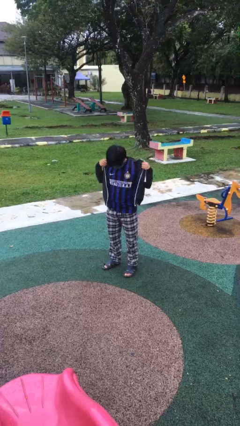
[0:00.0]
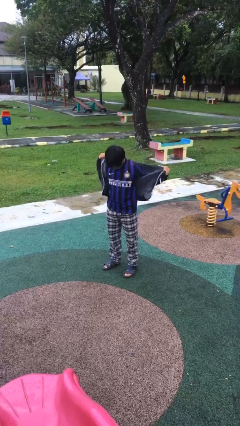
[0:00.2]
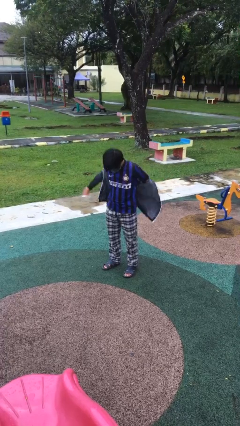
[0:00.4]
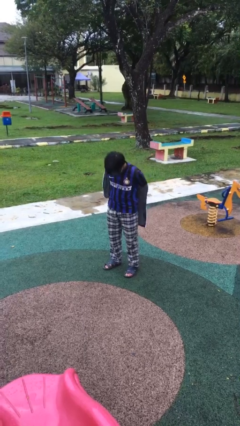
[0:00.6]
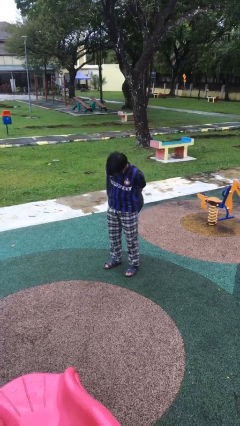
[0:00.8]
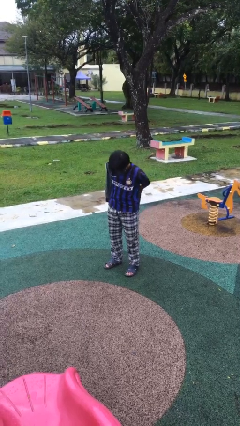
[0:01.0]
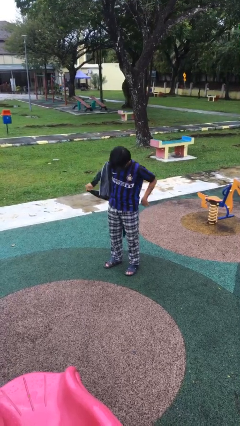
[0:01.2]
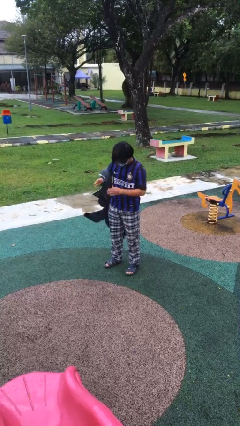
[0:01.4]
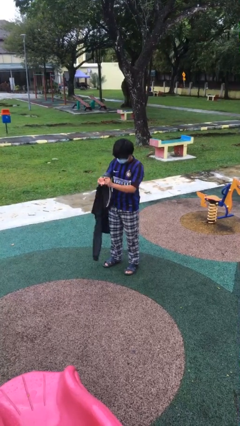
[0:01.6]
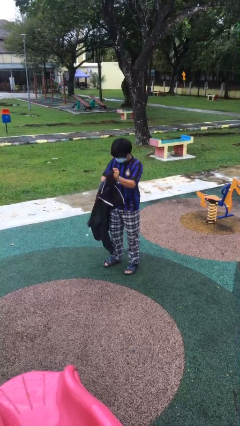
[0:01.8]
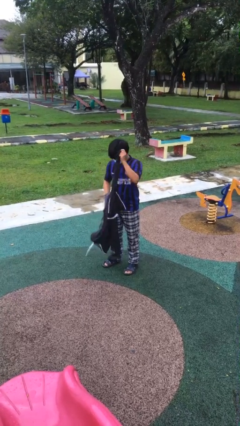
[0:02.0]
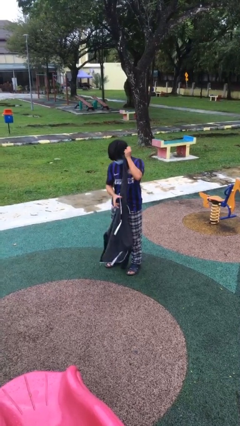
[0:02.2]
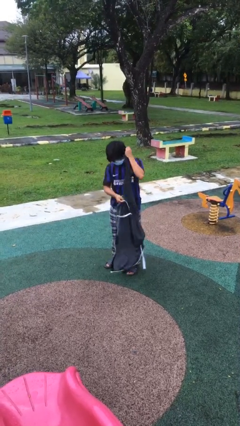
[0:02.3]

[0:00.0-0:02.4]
person takes off jacket

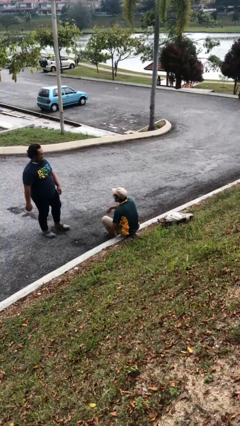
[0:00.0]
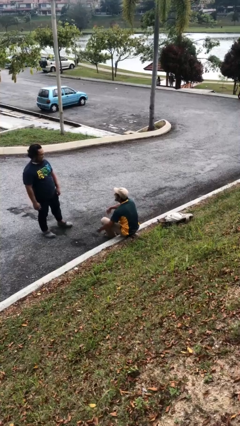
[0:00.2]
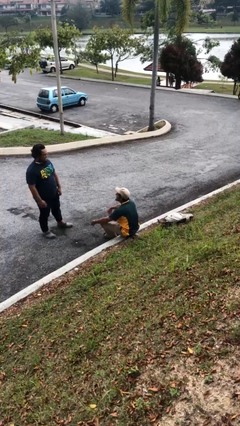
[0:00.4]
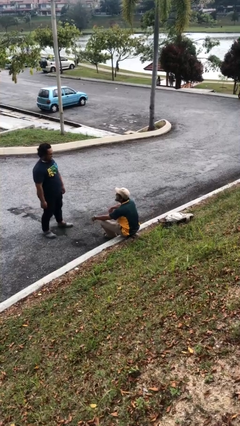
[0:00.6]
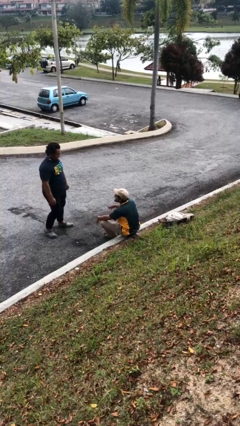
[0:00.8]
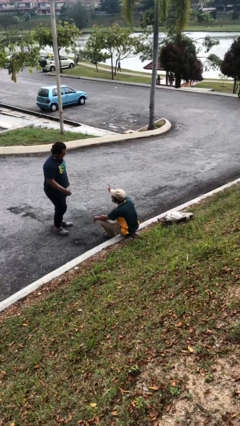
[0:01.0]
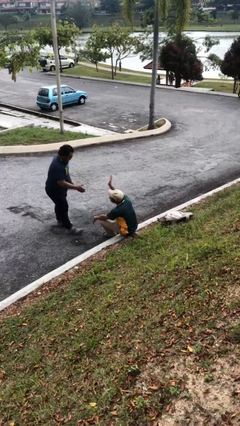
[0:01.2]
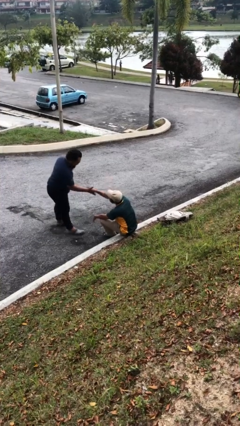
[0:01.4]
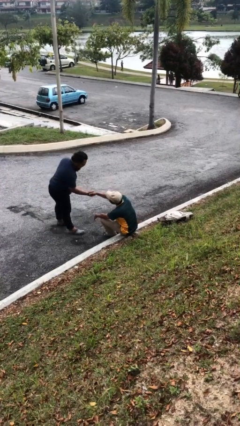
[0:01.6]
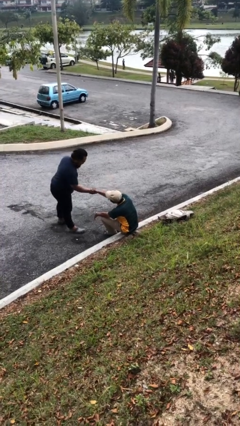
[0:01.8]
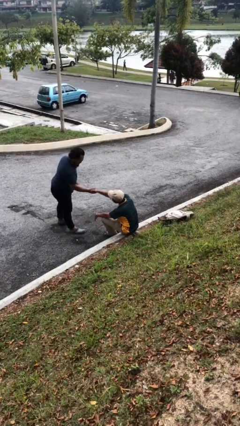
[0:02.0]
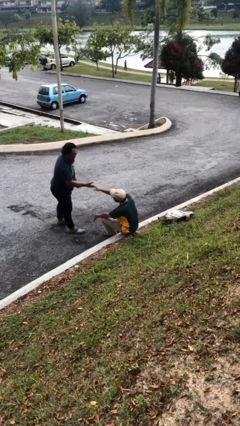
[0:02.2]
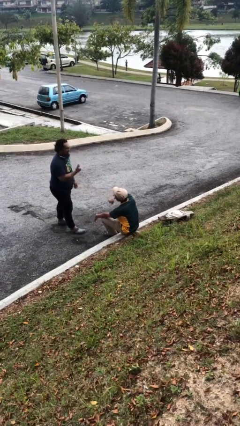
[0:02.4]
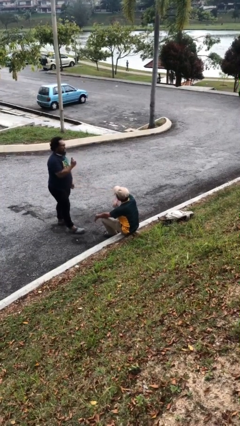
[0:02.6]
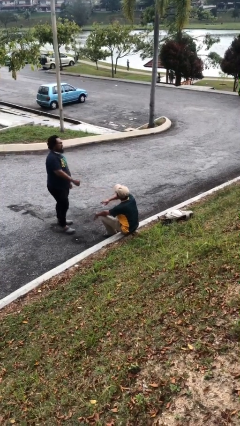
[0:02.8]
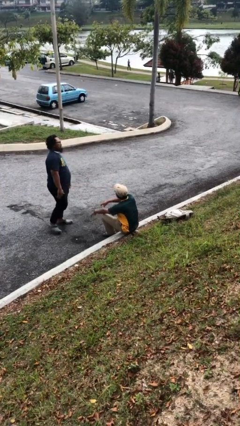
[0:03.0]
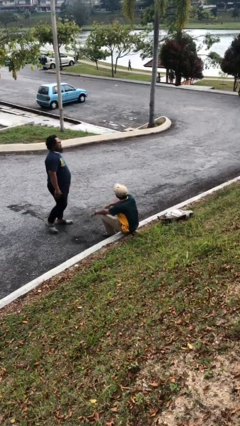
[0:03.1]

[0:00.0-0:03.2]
person shakes hand

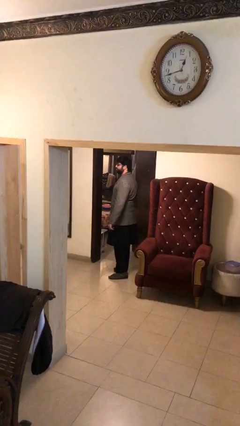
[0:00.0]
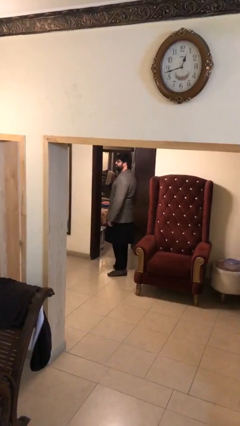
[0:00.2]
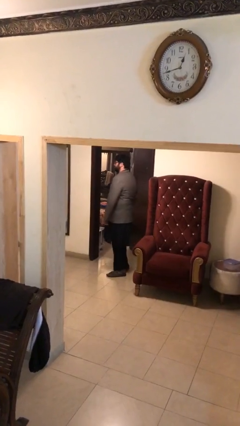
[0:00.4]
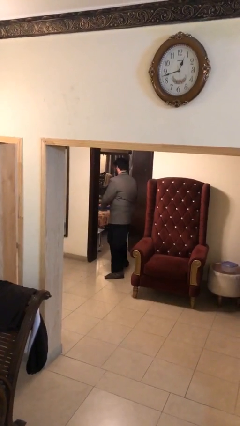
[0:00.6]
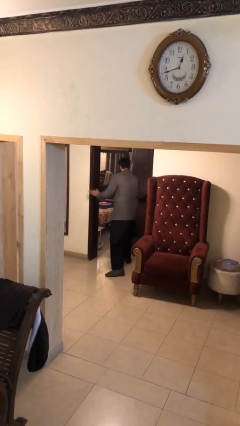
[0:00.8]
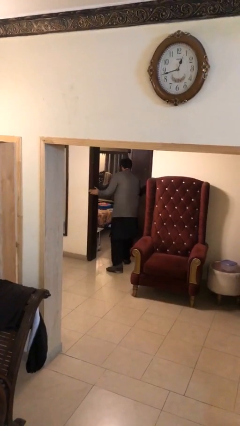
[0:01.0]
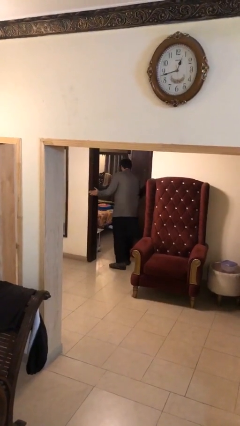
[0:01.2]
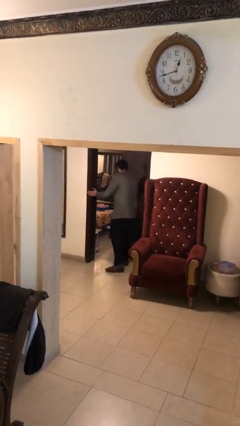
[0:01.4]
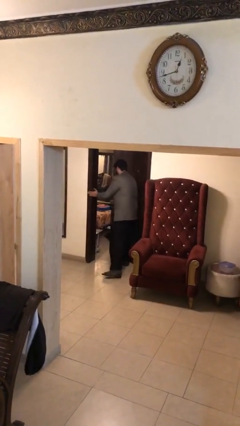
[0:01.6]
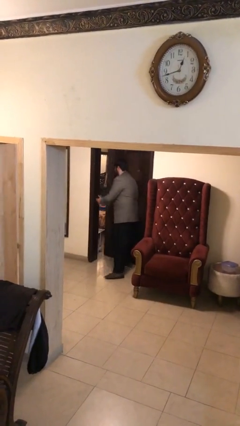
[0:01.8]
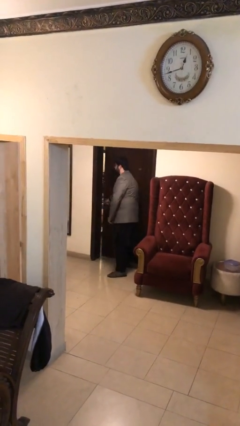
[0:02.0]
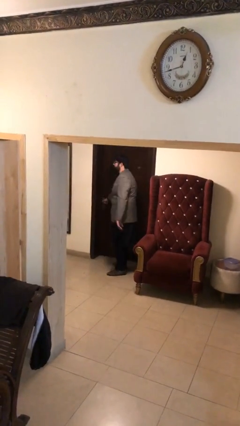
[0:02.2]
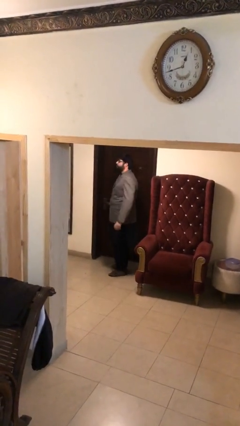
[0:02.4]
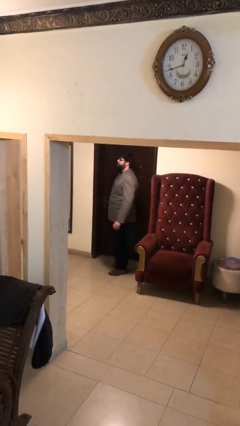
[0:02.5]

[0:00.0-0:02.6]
person closes facility door

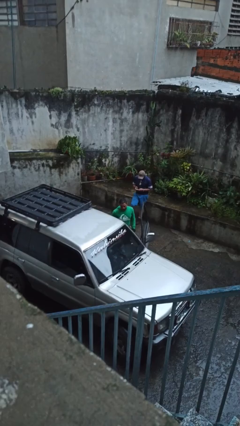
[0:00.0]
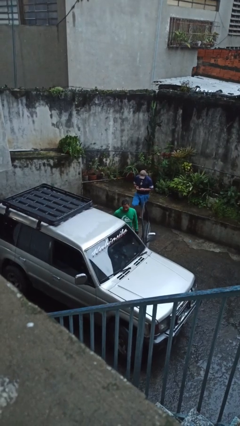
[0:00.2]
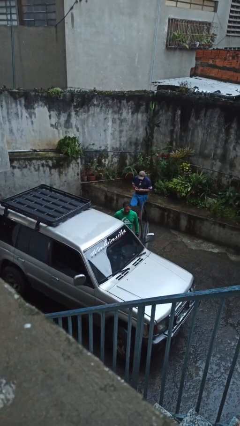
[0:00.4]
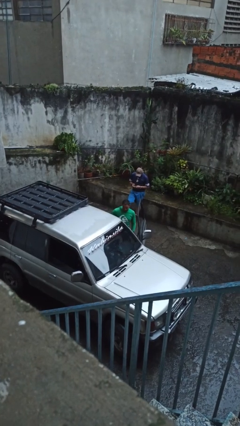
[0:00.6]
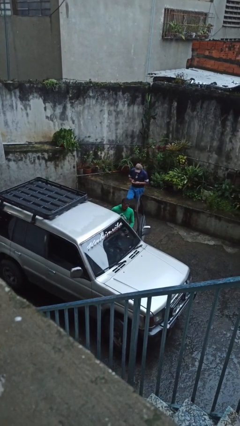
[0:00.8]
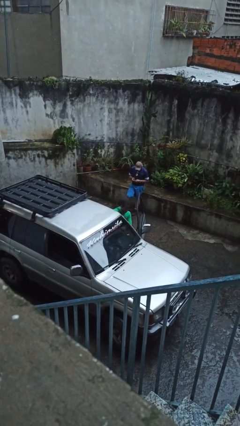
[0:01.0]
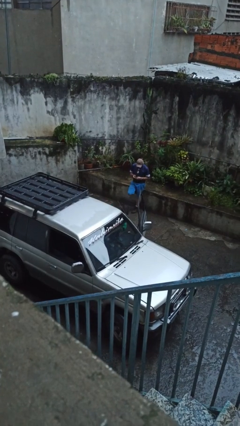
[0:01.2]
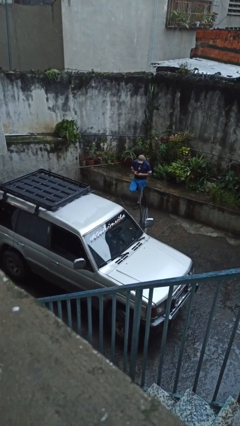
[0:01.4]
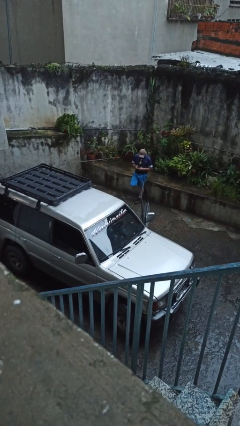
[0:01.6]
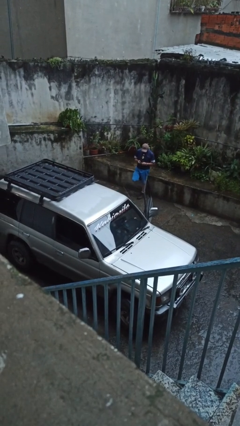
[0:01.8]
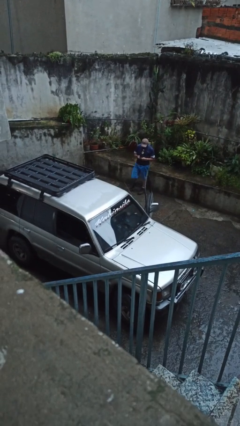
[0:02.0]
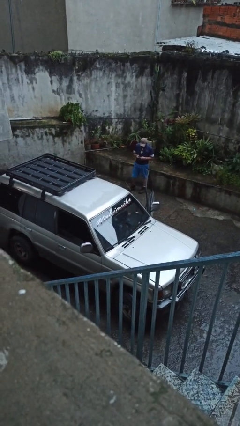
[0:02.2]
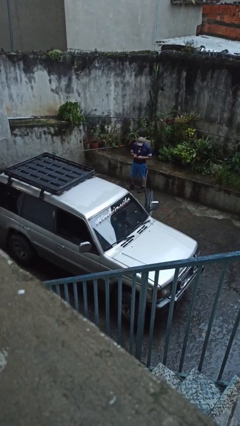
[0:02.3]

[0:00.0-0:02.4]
person enters car

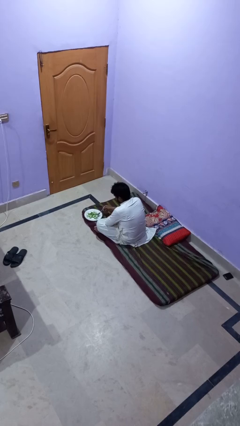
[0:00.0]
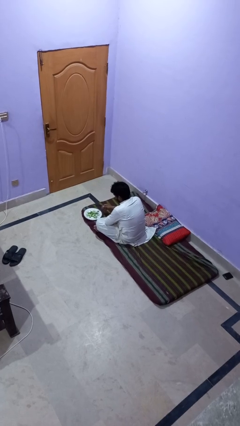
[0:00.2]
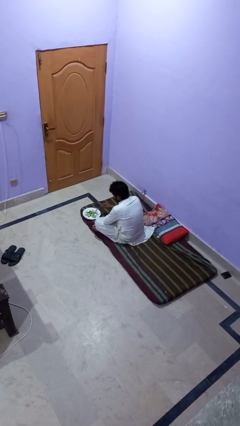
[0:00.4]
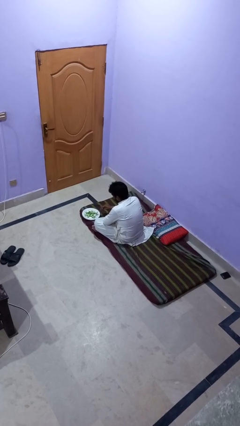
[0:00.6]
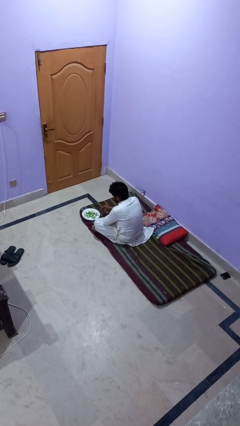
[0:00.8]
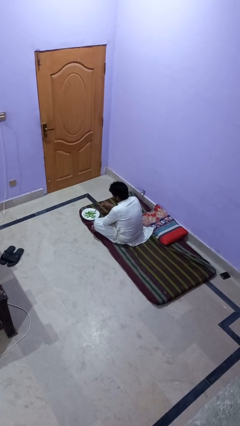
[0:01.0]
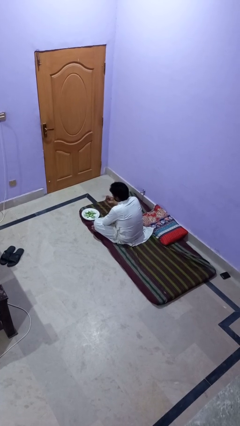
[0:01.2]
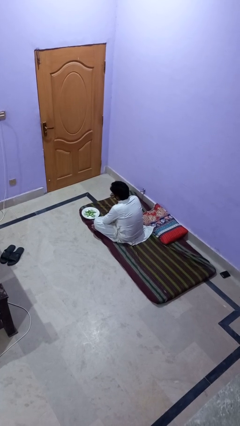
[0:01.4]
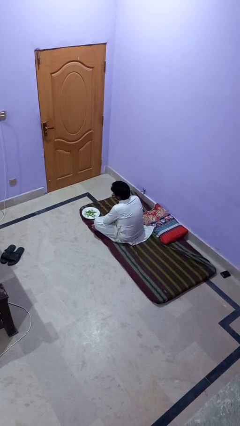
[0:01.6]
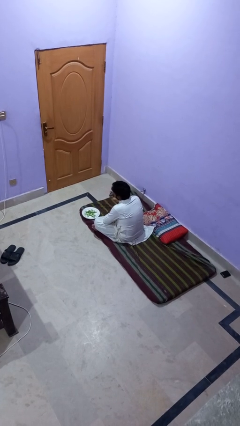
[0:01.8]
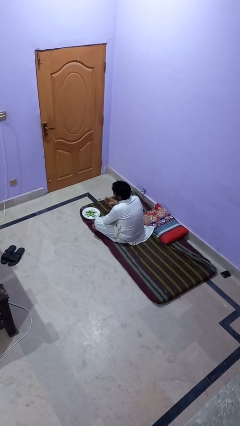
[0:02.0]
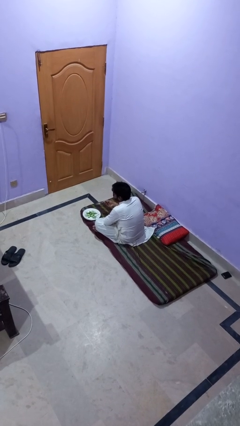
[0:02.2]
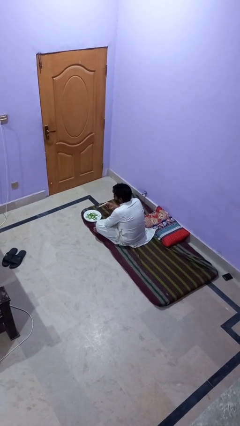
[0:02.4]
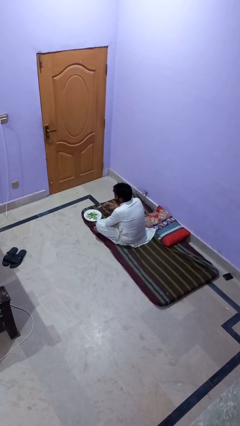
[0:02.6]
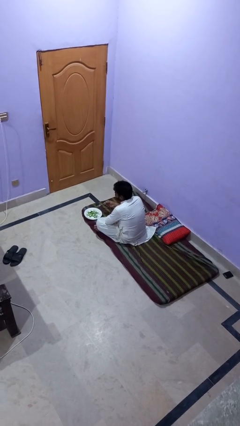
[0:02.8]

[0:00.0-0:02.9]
person eats with utensil

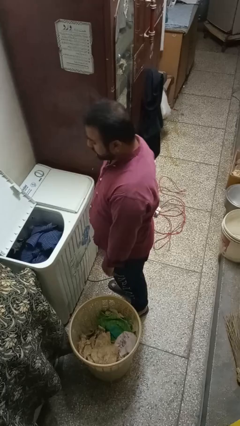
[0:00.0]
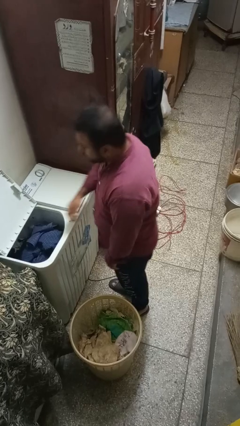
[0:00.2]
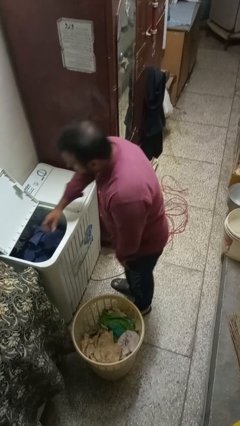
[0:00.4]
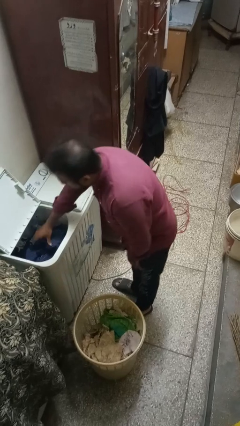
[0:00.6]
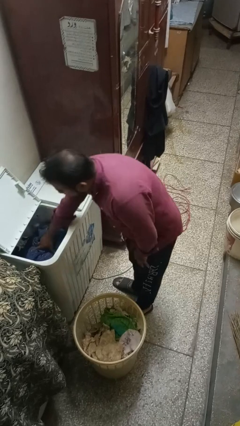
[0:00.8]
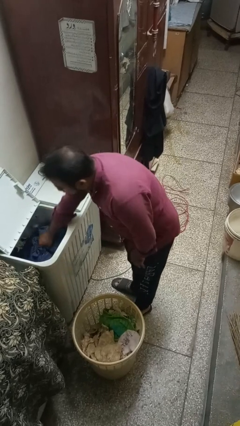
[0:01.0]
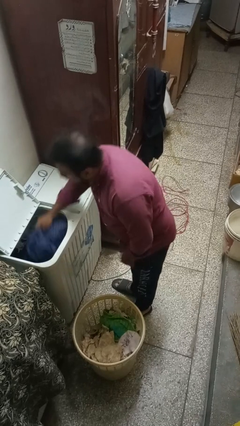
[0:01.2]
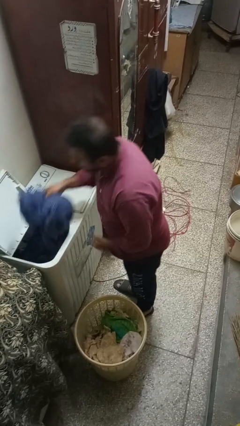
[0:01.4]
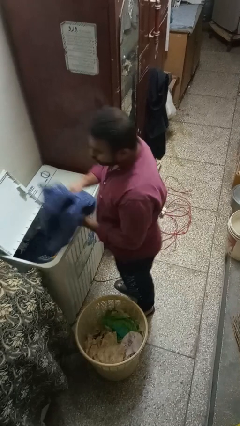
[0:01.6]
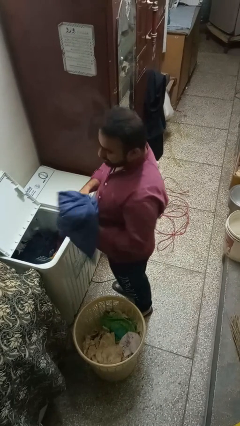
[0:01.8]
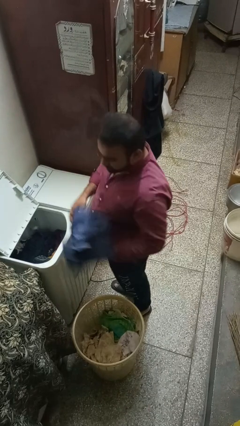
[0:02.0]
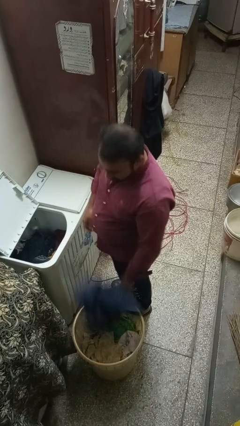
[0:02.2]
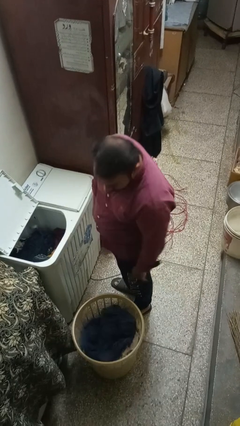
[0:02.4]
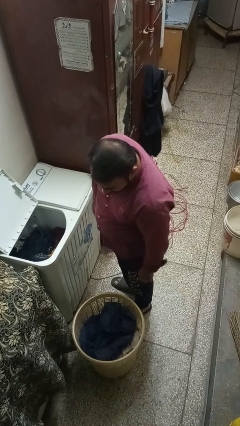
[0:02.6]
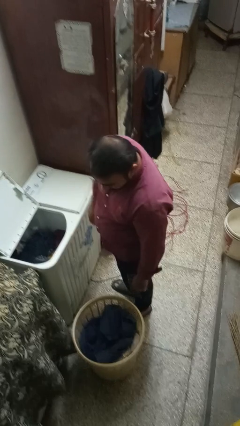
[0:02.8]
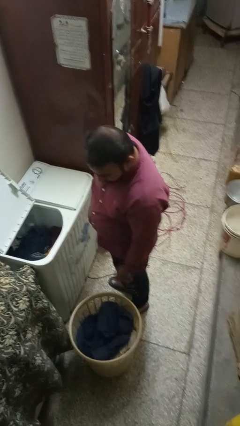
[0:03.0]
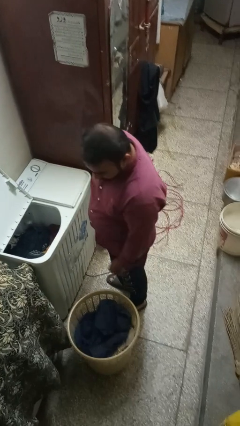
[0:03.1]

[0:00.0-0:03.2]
person unloads clotheswasher

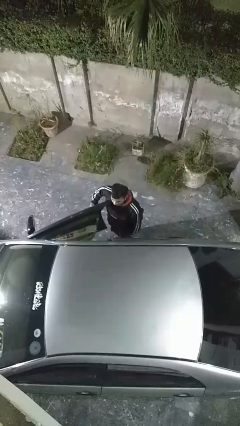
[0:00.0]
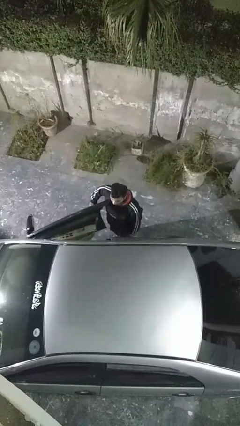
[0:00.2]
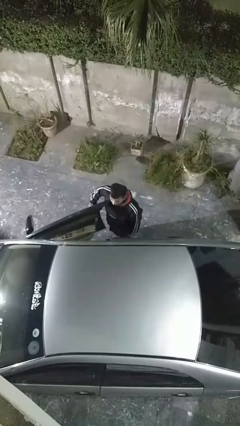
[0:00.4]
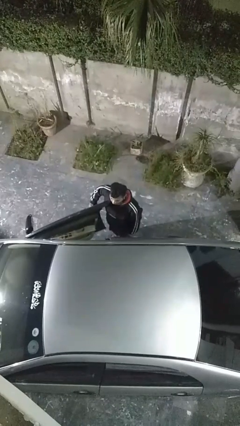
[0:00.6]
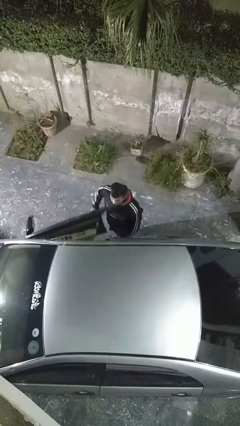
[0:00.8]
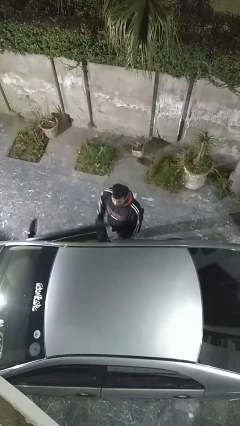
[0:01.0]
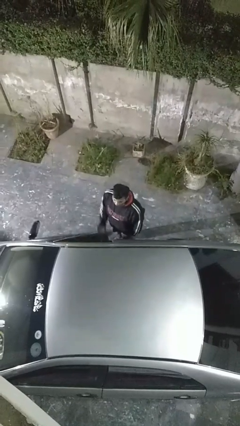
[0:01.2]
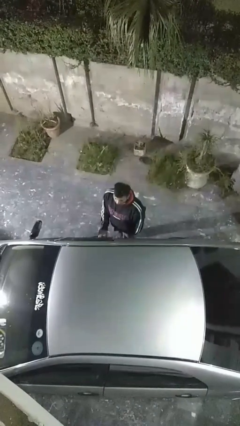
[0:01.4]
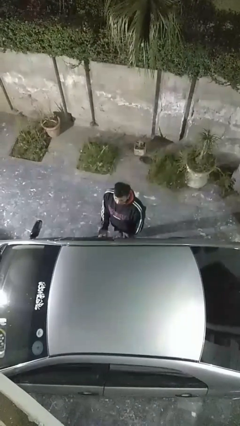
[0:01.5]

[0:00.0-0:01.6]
person closes car door
